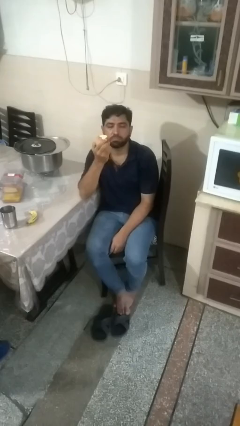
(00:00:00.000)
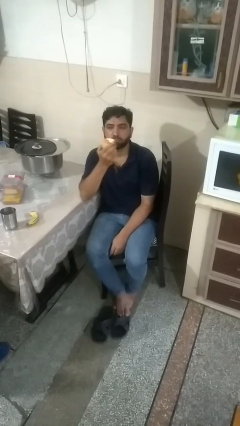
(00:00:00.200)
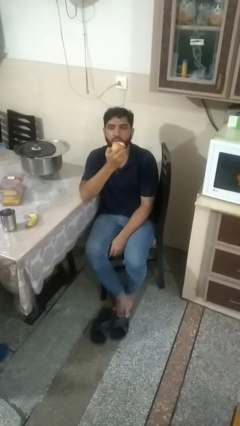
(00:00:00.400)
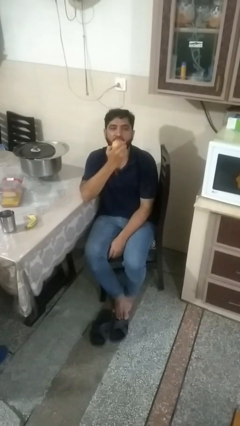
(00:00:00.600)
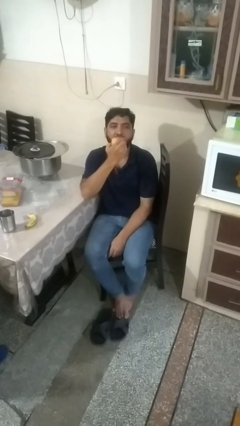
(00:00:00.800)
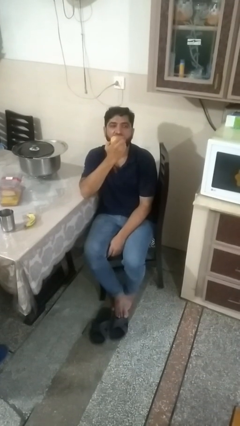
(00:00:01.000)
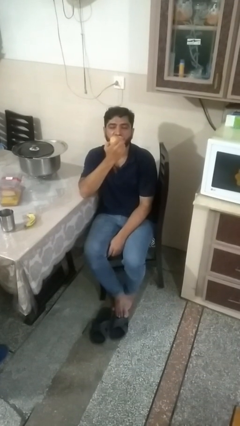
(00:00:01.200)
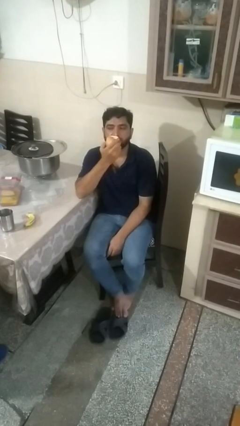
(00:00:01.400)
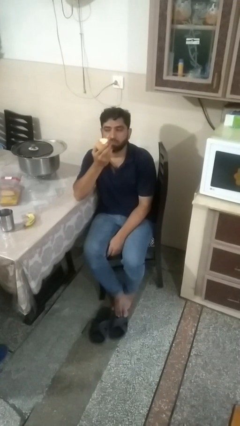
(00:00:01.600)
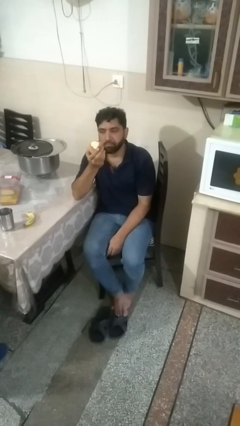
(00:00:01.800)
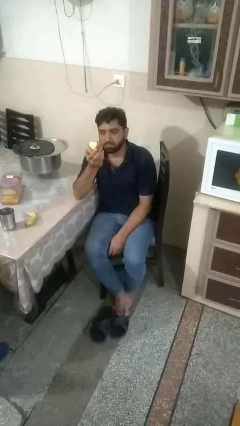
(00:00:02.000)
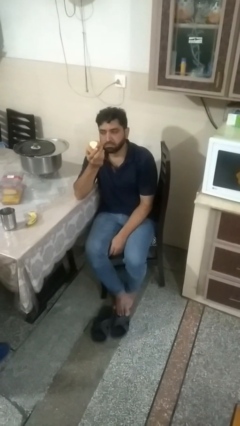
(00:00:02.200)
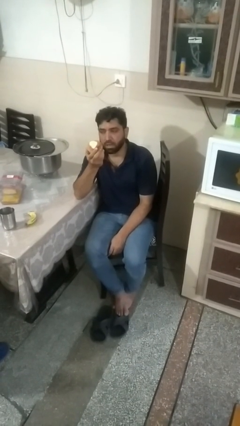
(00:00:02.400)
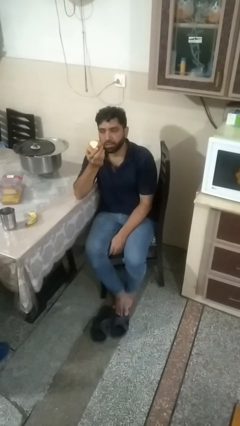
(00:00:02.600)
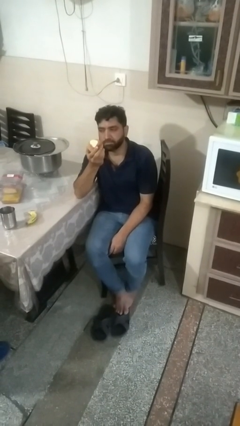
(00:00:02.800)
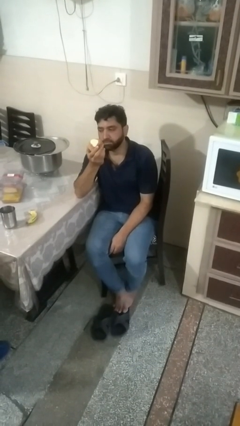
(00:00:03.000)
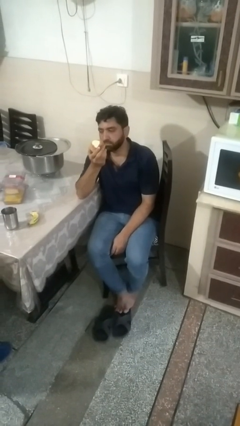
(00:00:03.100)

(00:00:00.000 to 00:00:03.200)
person eats apple

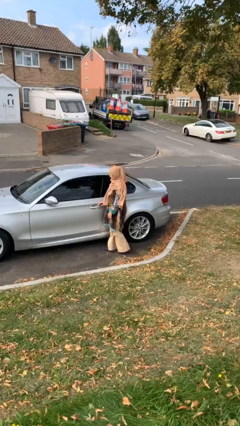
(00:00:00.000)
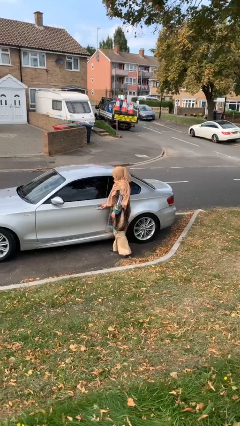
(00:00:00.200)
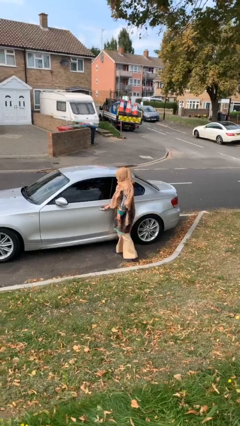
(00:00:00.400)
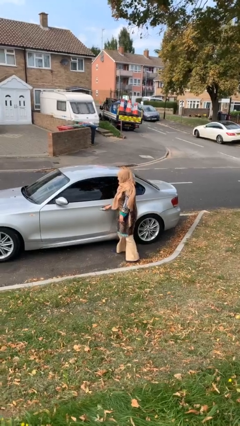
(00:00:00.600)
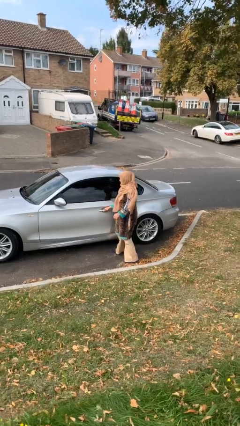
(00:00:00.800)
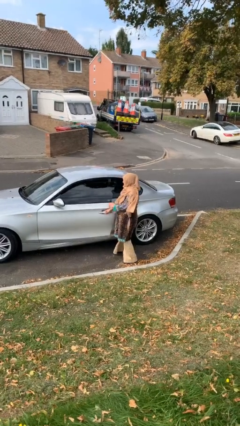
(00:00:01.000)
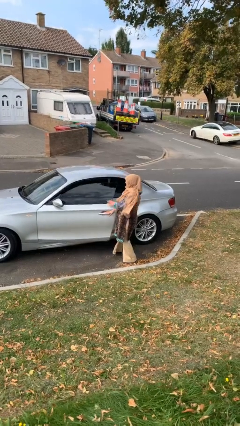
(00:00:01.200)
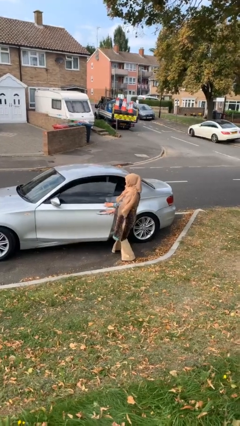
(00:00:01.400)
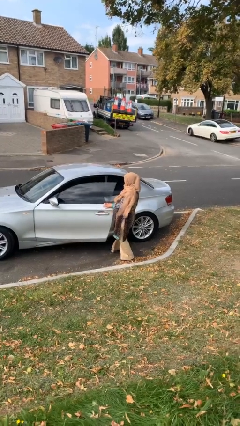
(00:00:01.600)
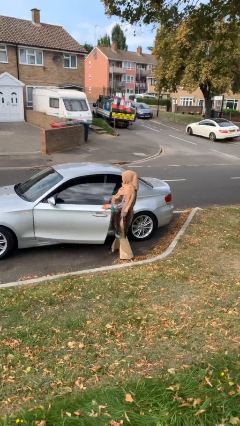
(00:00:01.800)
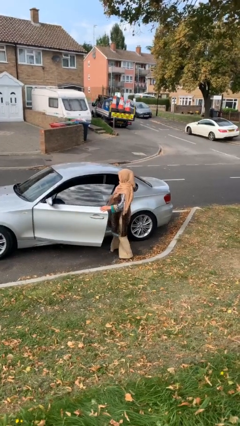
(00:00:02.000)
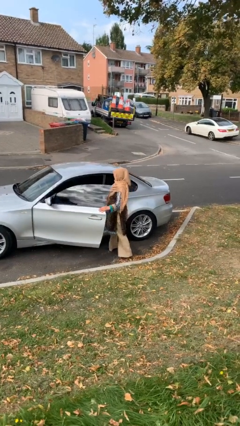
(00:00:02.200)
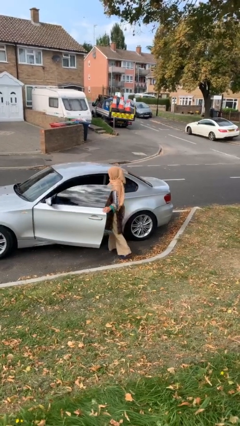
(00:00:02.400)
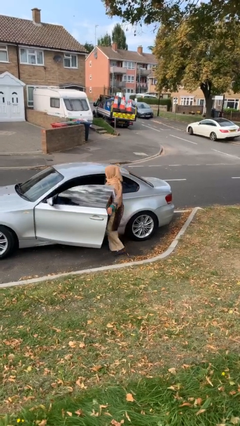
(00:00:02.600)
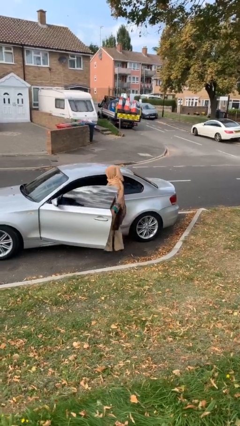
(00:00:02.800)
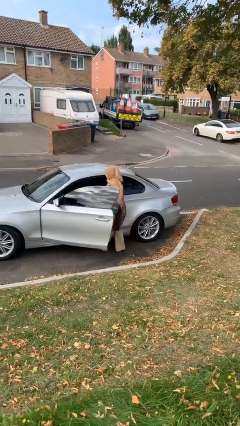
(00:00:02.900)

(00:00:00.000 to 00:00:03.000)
person opens car door

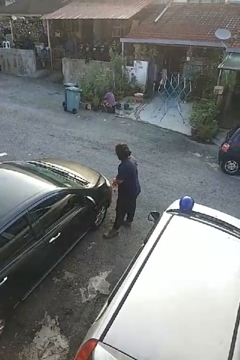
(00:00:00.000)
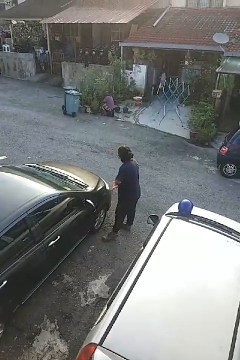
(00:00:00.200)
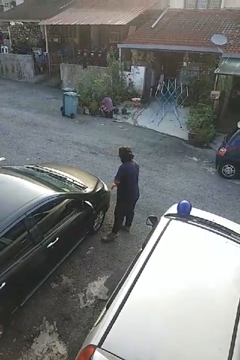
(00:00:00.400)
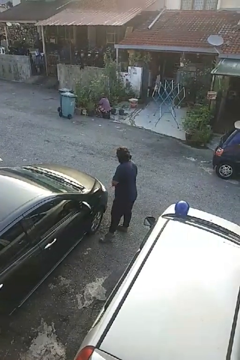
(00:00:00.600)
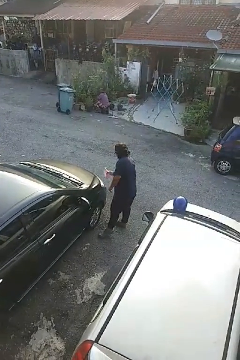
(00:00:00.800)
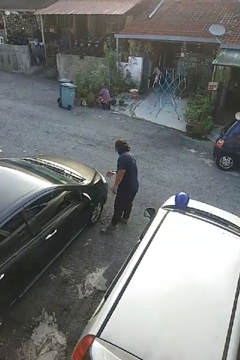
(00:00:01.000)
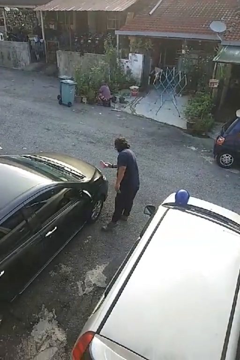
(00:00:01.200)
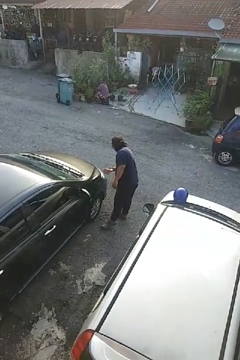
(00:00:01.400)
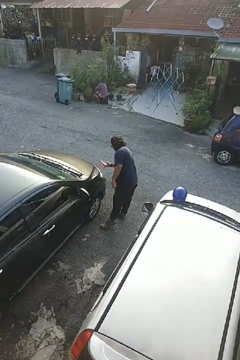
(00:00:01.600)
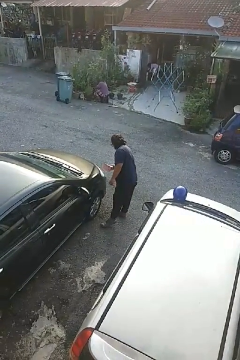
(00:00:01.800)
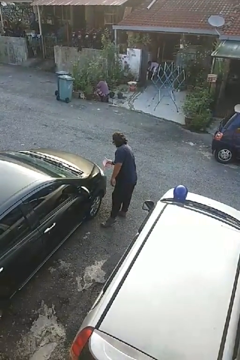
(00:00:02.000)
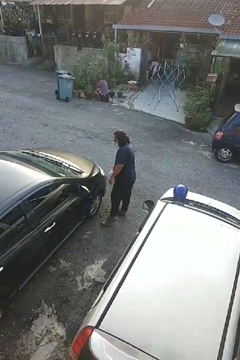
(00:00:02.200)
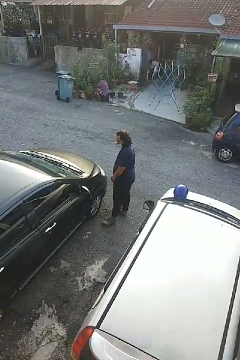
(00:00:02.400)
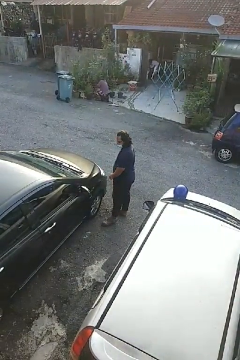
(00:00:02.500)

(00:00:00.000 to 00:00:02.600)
person polishes car with rag

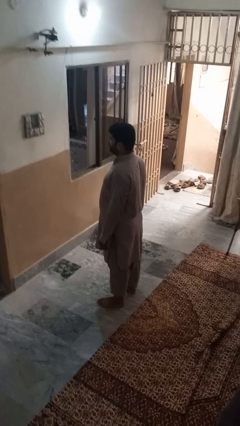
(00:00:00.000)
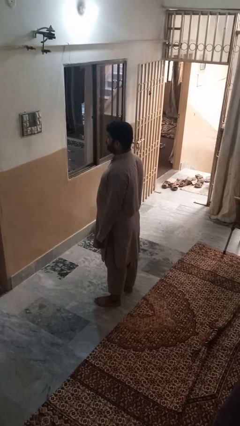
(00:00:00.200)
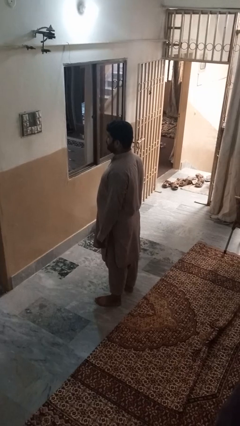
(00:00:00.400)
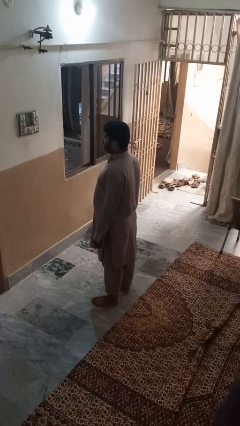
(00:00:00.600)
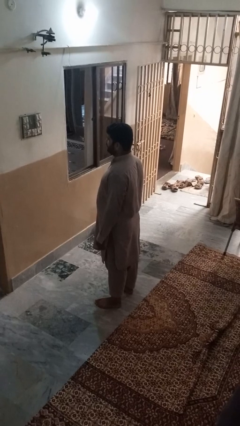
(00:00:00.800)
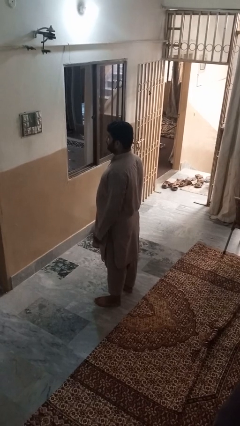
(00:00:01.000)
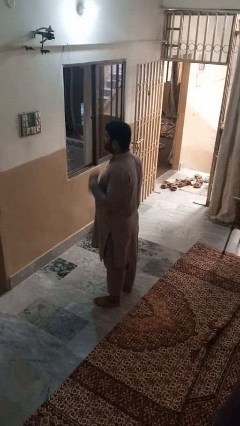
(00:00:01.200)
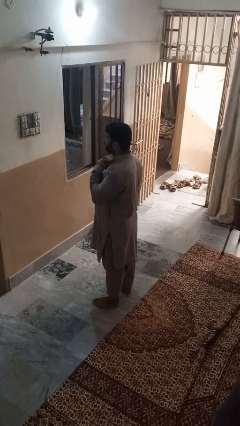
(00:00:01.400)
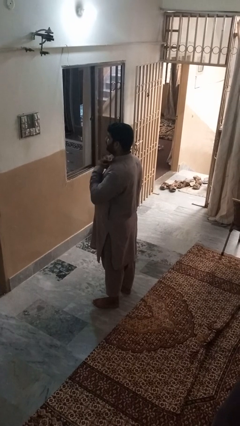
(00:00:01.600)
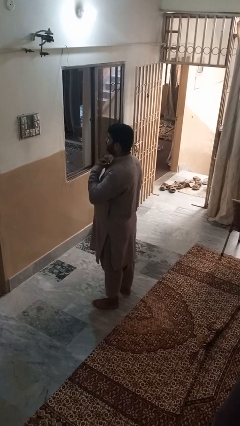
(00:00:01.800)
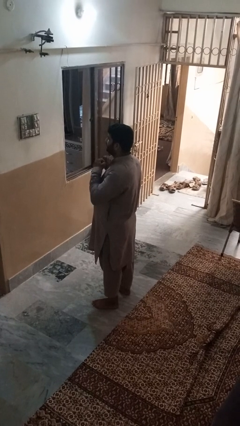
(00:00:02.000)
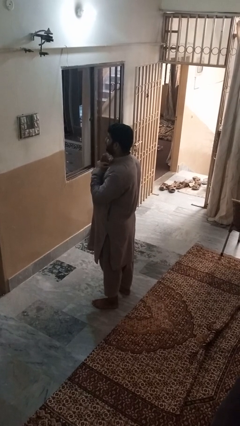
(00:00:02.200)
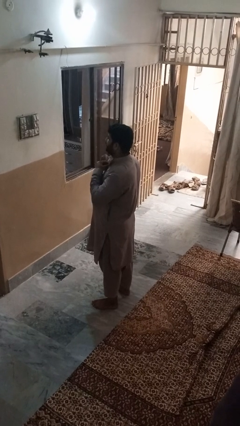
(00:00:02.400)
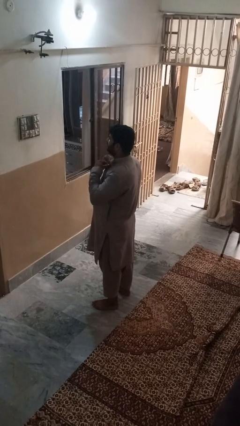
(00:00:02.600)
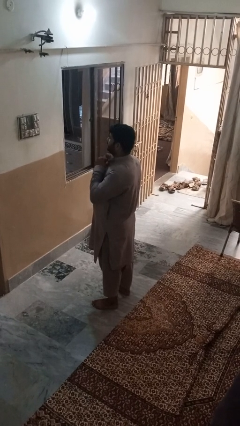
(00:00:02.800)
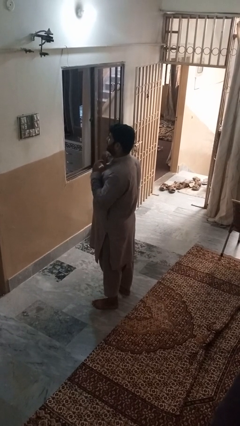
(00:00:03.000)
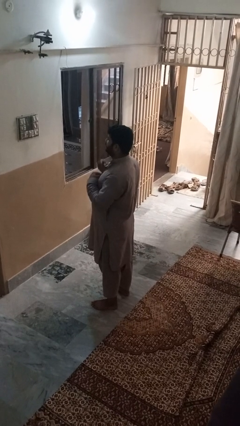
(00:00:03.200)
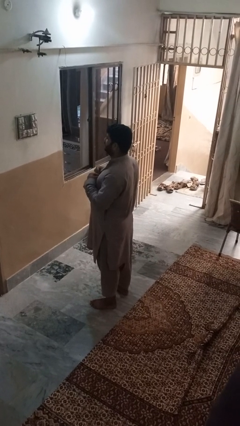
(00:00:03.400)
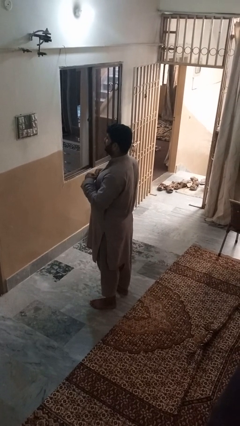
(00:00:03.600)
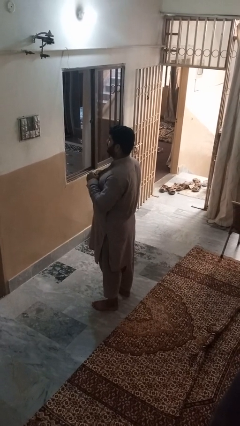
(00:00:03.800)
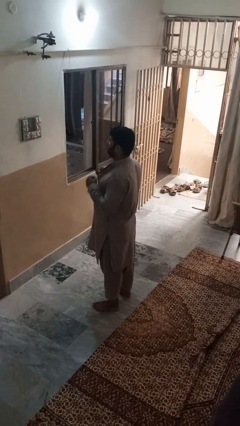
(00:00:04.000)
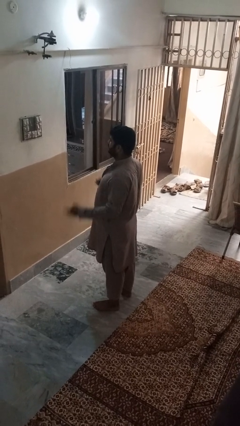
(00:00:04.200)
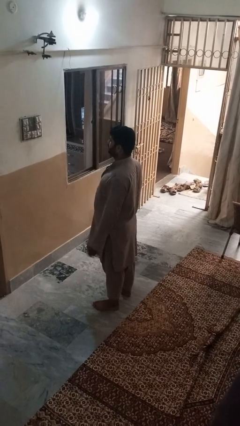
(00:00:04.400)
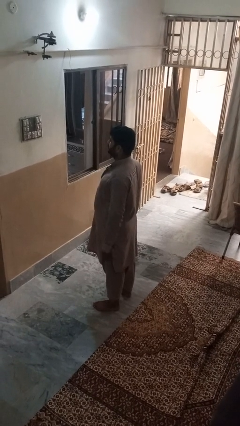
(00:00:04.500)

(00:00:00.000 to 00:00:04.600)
person unbuttons shirt

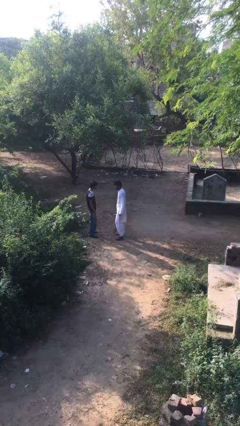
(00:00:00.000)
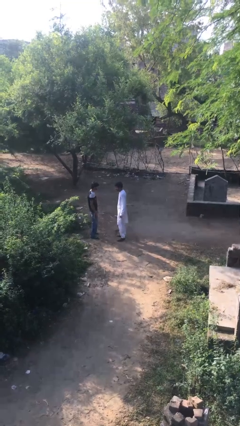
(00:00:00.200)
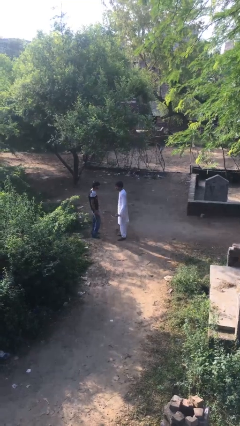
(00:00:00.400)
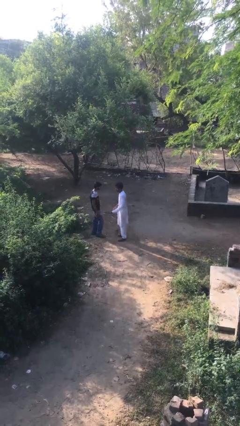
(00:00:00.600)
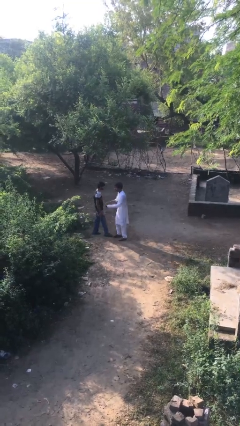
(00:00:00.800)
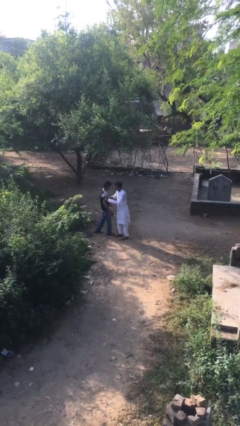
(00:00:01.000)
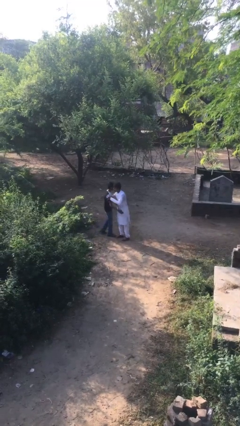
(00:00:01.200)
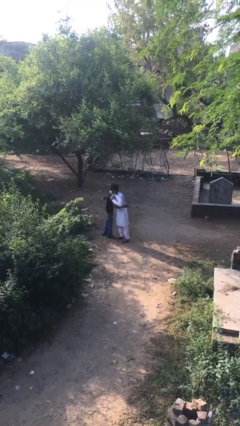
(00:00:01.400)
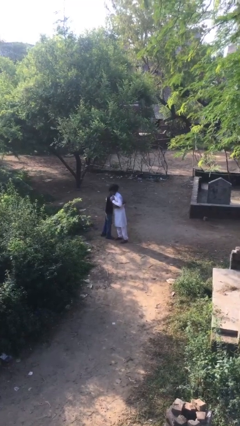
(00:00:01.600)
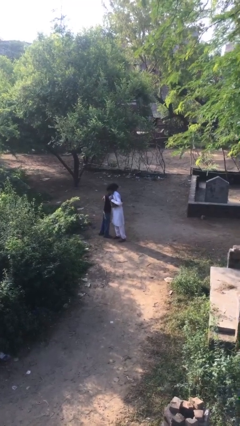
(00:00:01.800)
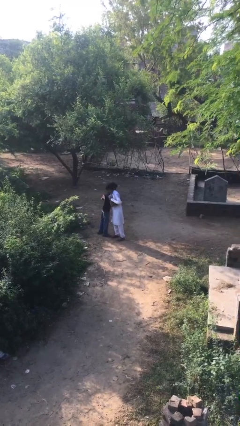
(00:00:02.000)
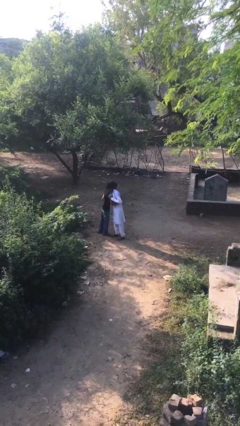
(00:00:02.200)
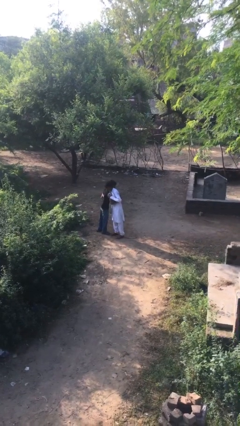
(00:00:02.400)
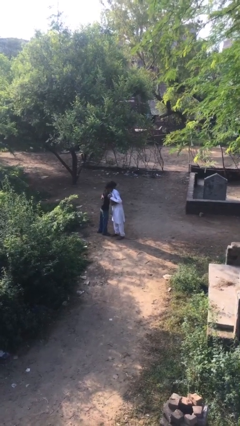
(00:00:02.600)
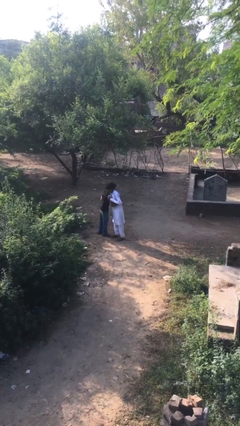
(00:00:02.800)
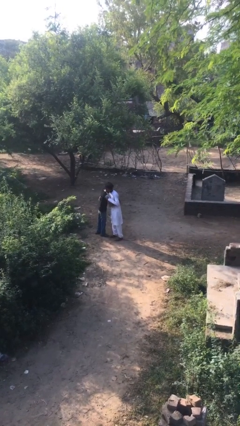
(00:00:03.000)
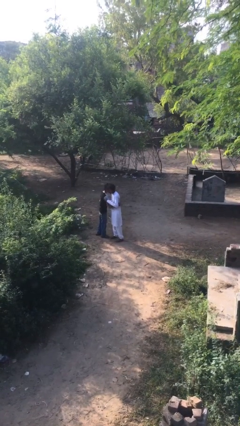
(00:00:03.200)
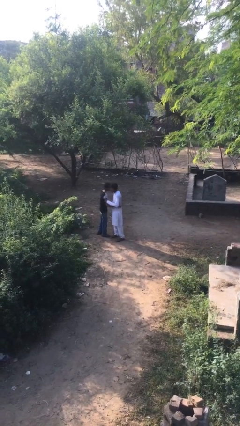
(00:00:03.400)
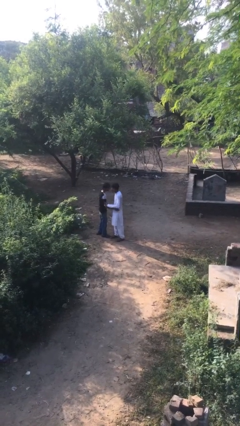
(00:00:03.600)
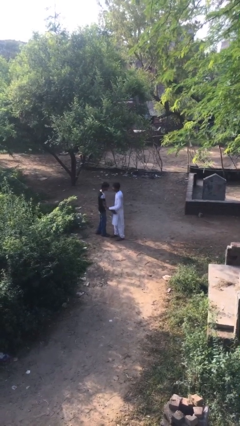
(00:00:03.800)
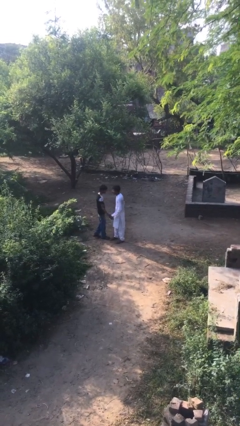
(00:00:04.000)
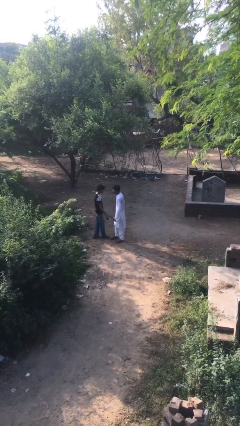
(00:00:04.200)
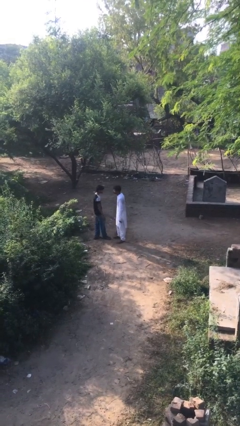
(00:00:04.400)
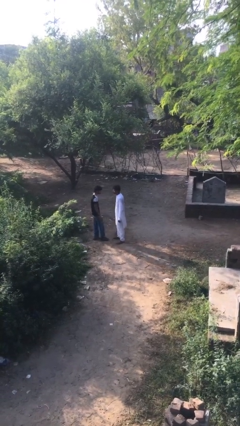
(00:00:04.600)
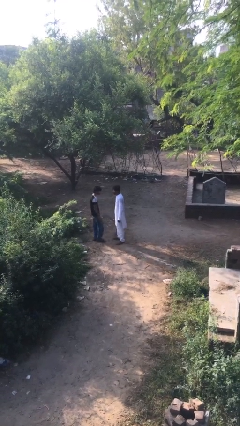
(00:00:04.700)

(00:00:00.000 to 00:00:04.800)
person embraces person
